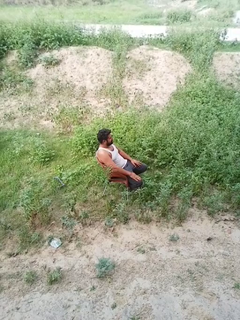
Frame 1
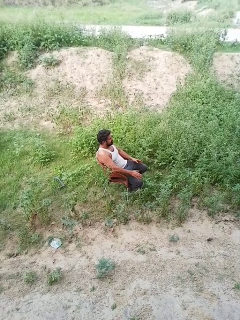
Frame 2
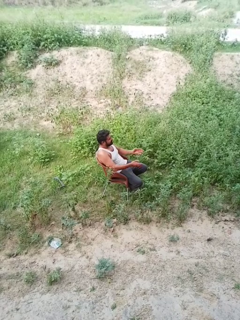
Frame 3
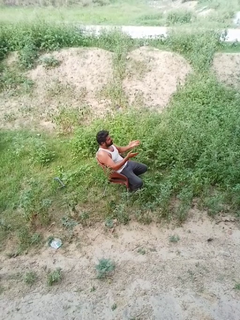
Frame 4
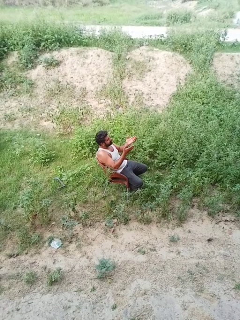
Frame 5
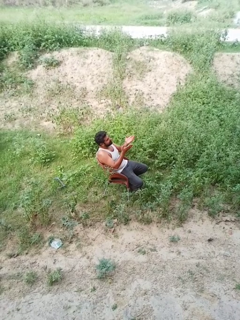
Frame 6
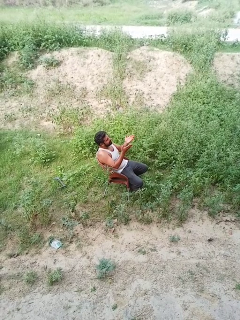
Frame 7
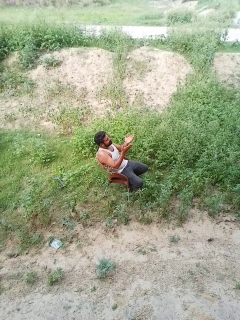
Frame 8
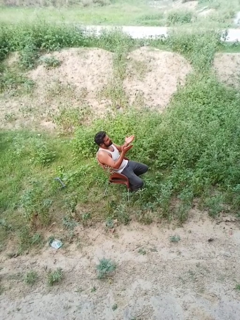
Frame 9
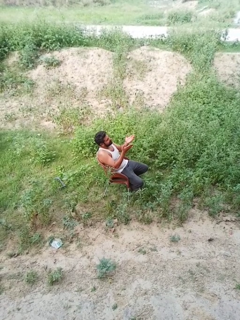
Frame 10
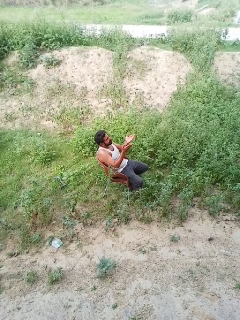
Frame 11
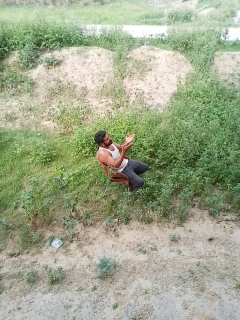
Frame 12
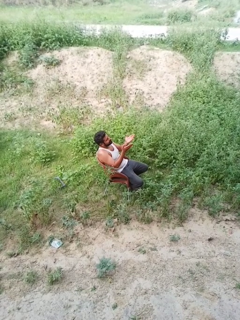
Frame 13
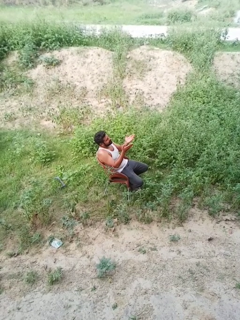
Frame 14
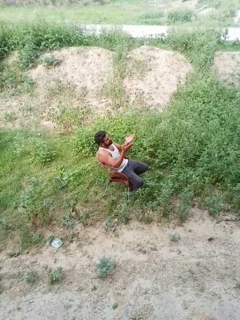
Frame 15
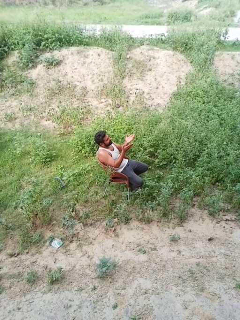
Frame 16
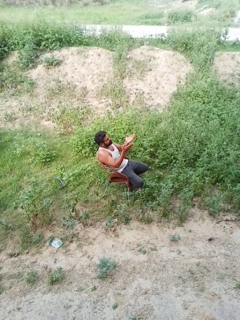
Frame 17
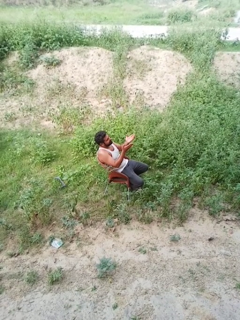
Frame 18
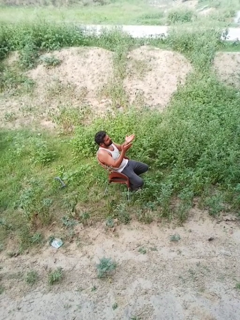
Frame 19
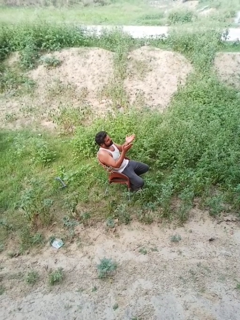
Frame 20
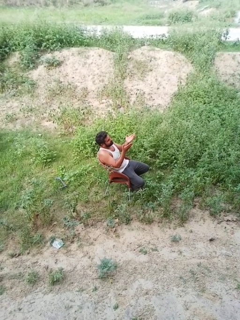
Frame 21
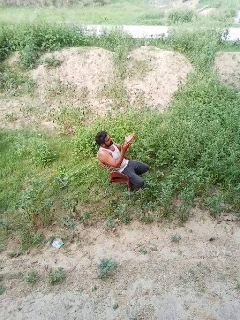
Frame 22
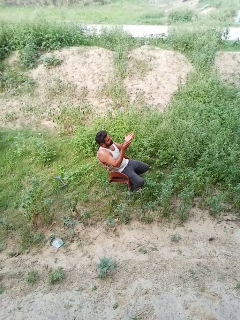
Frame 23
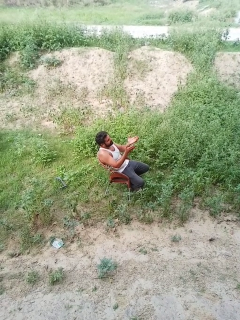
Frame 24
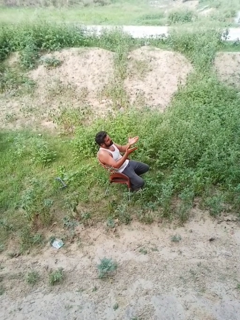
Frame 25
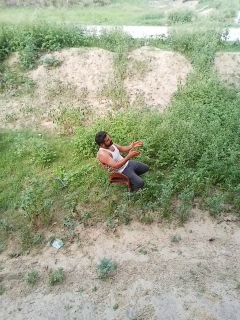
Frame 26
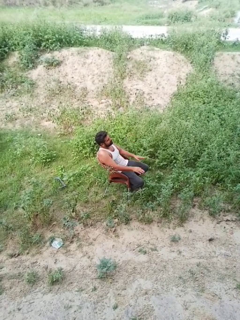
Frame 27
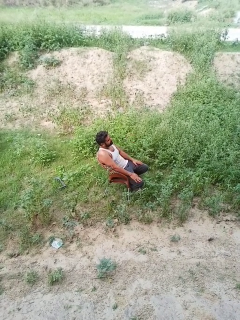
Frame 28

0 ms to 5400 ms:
person prays

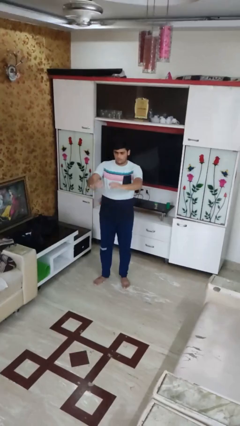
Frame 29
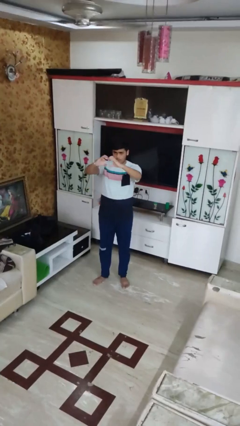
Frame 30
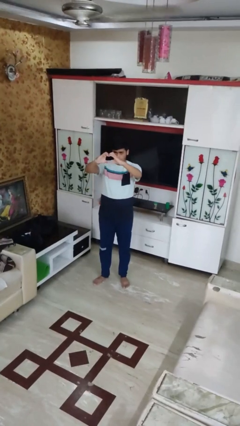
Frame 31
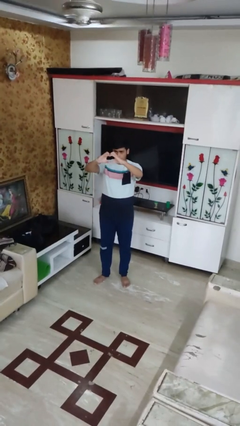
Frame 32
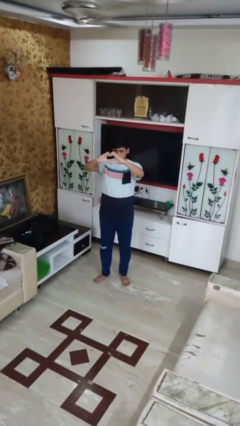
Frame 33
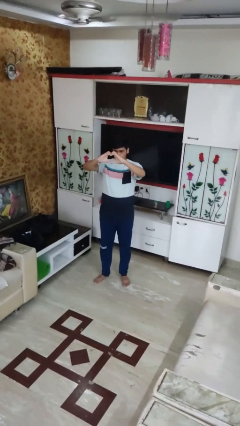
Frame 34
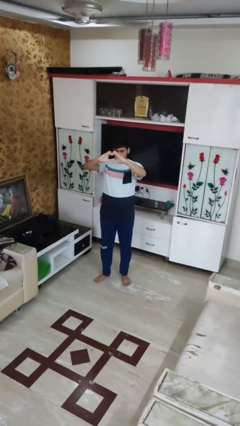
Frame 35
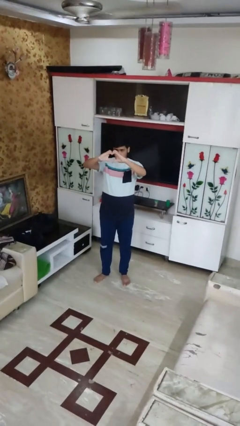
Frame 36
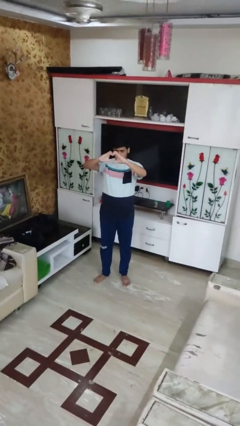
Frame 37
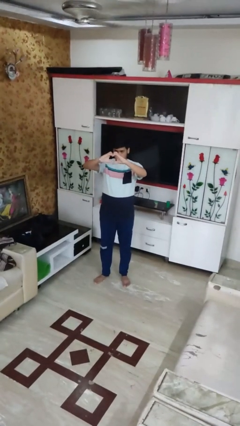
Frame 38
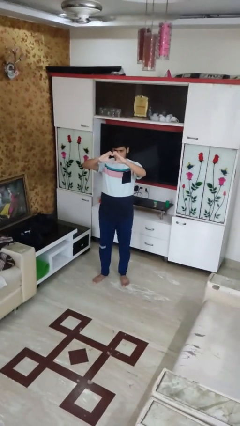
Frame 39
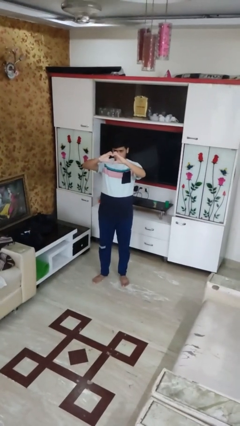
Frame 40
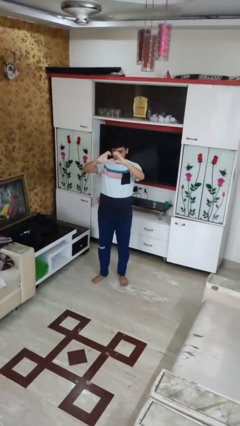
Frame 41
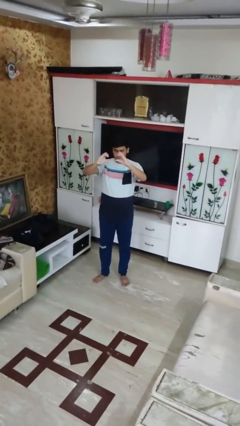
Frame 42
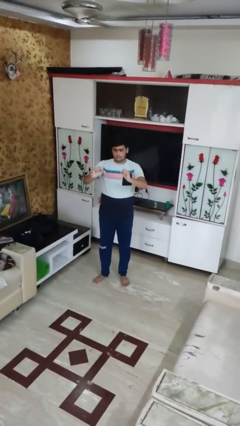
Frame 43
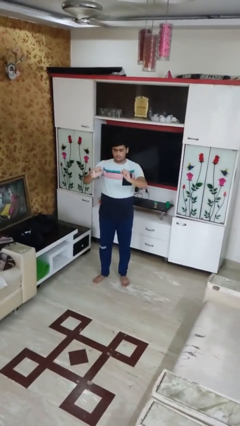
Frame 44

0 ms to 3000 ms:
person gestures heart

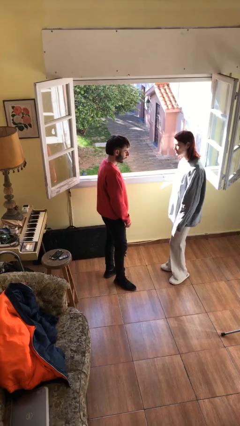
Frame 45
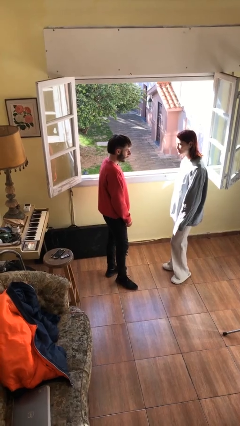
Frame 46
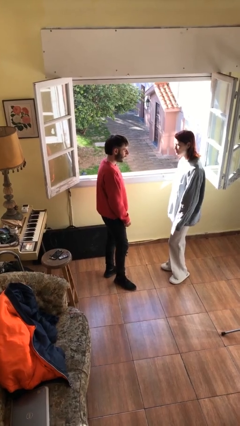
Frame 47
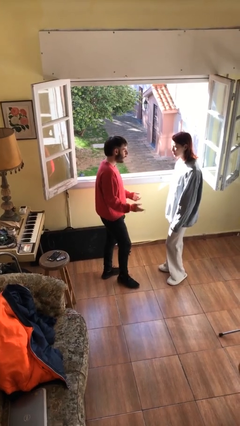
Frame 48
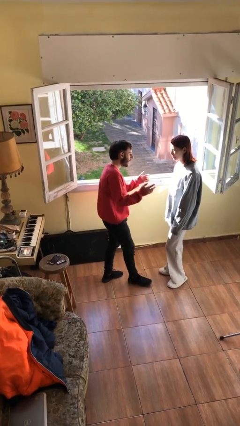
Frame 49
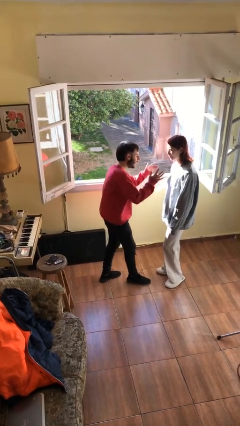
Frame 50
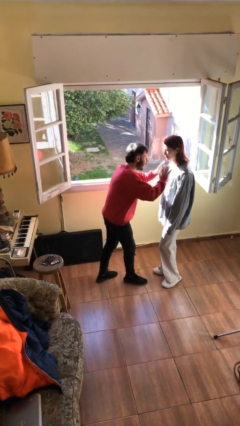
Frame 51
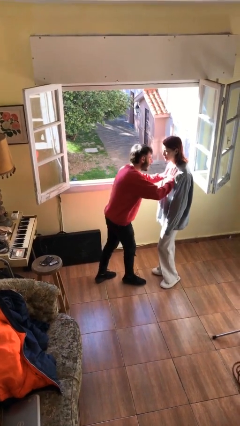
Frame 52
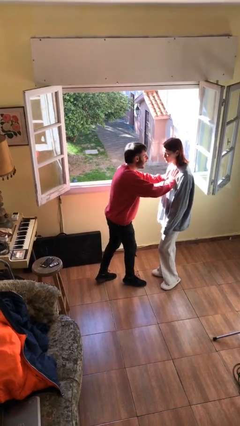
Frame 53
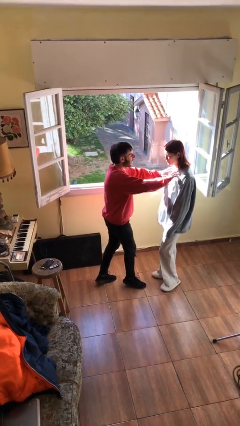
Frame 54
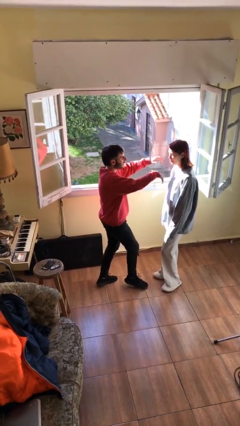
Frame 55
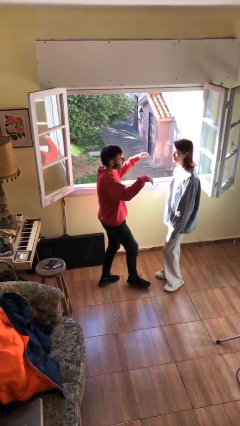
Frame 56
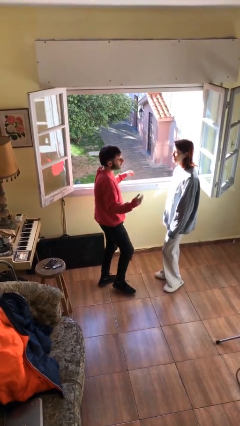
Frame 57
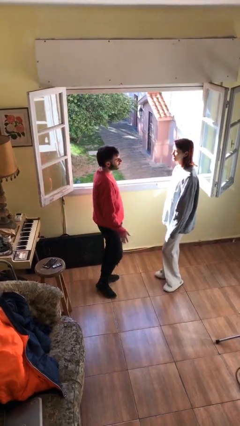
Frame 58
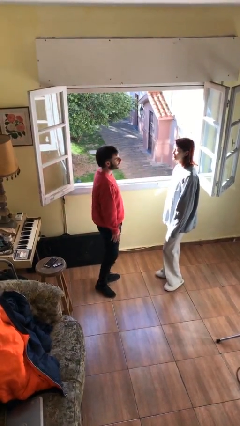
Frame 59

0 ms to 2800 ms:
person shoves person

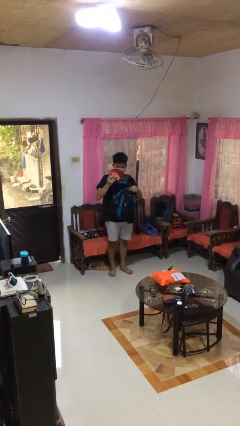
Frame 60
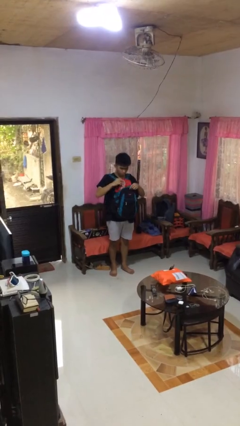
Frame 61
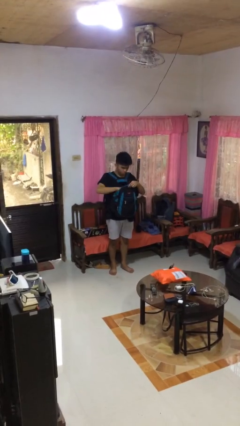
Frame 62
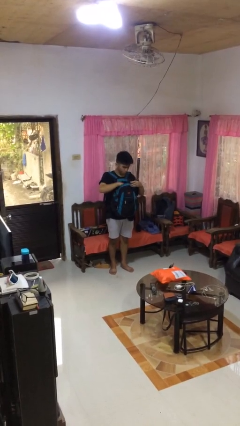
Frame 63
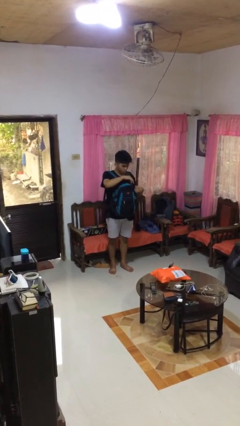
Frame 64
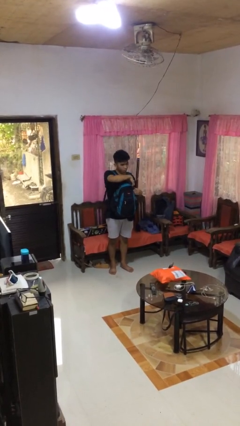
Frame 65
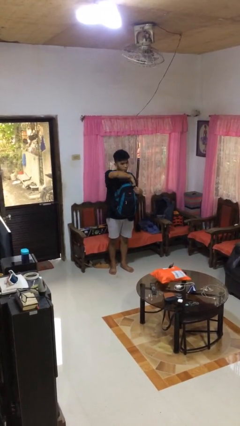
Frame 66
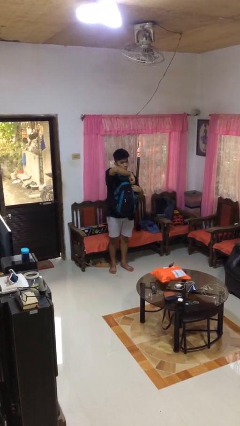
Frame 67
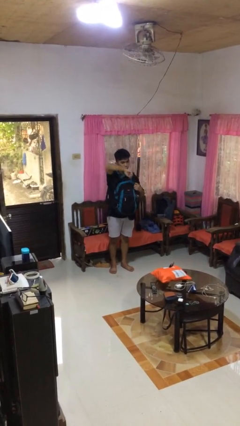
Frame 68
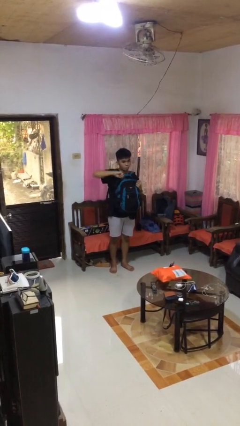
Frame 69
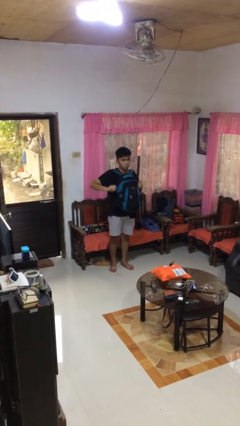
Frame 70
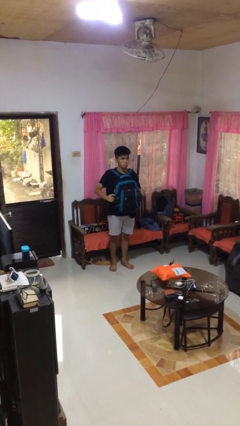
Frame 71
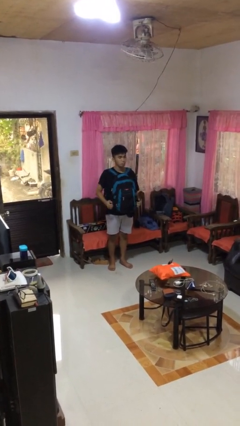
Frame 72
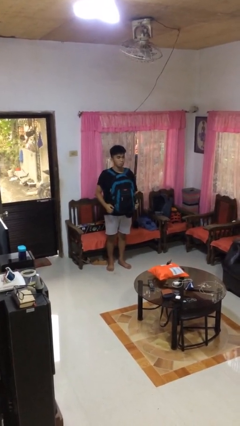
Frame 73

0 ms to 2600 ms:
person puts object into backpack

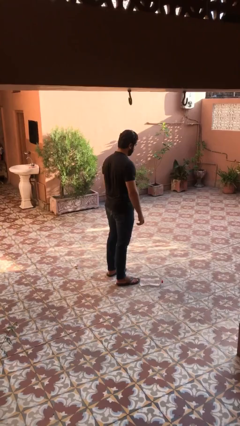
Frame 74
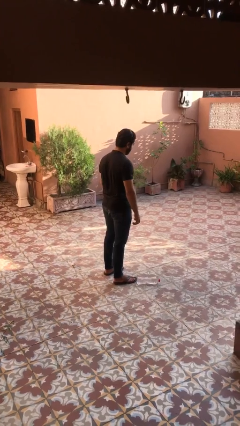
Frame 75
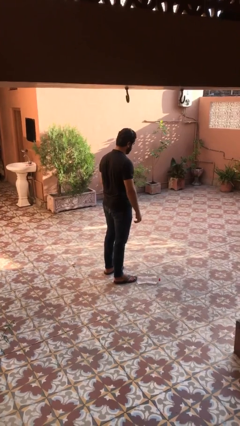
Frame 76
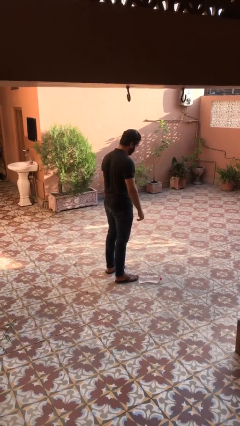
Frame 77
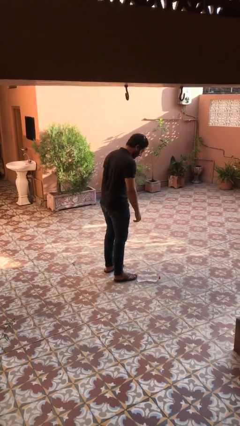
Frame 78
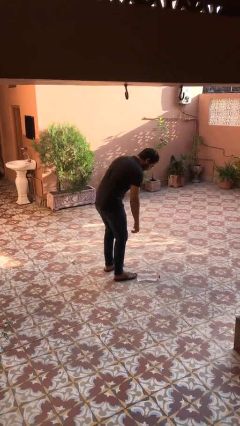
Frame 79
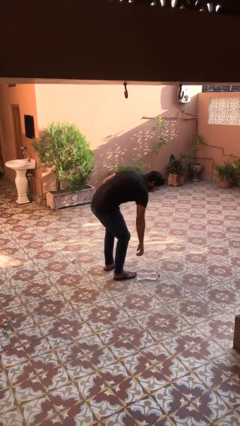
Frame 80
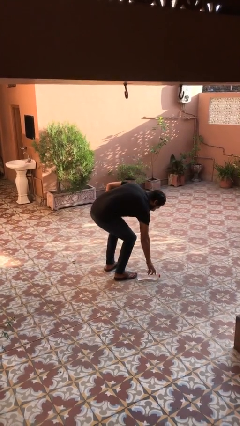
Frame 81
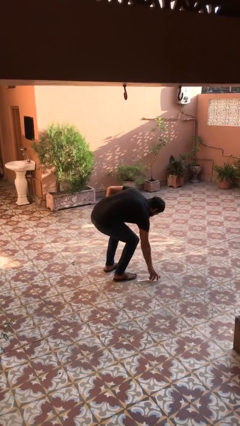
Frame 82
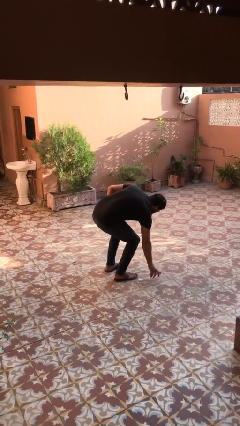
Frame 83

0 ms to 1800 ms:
person picks up object from floor

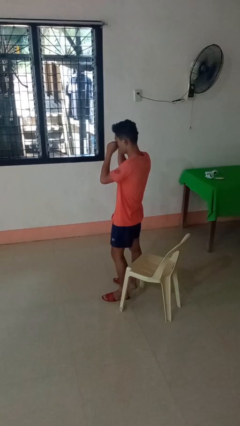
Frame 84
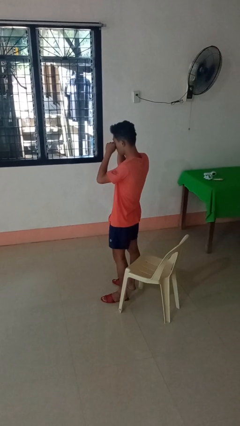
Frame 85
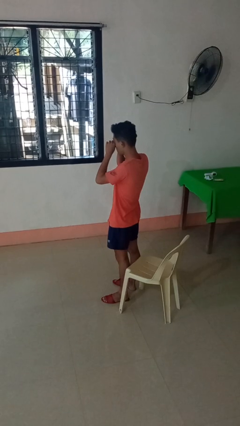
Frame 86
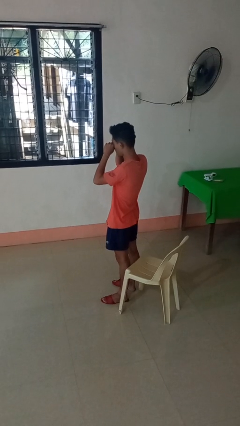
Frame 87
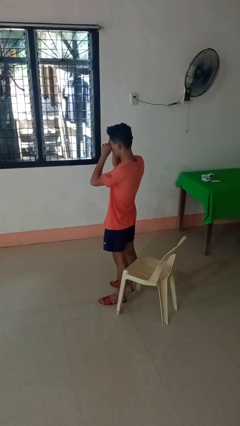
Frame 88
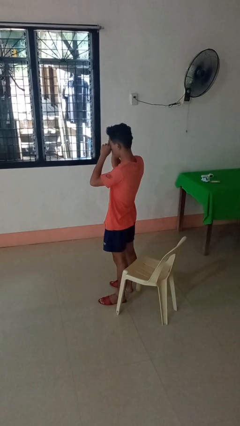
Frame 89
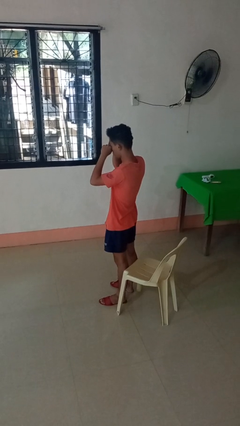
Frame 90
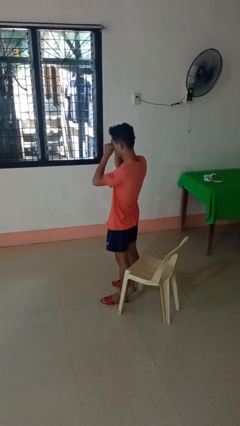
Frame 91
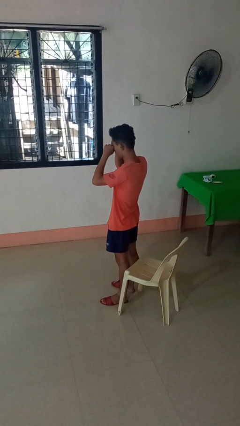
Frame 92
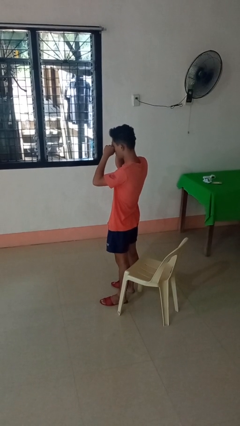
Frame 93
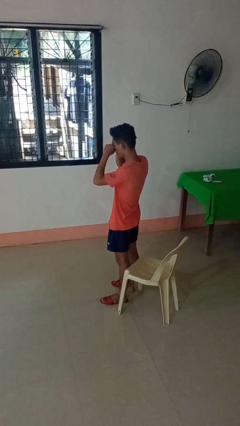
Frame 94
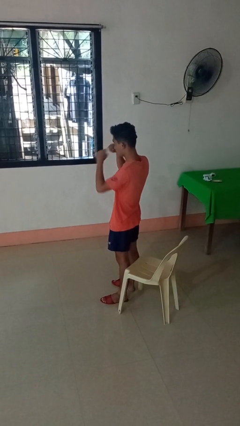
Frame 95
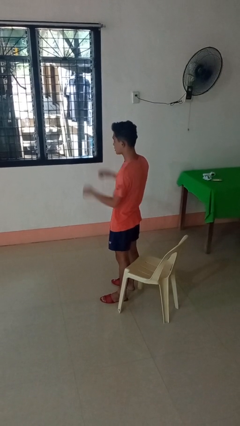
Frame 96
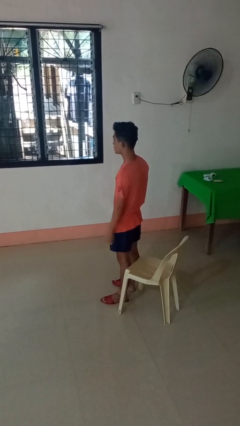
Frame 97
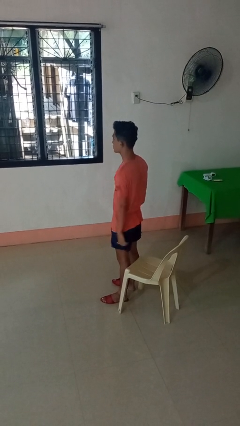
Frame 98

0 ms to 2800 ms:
person rubs eyes
